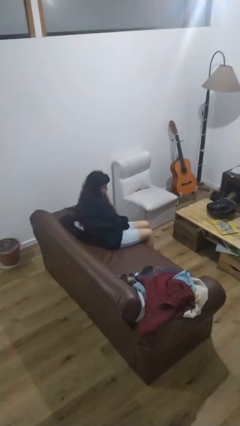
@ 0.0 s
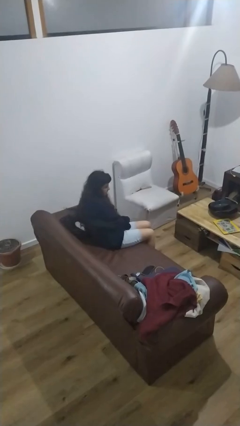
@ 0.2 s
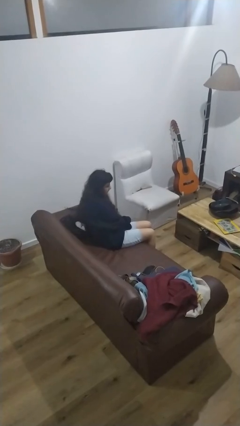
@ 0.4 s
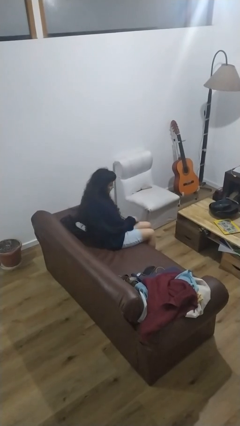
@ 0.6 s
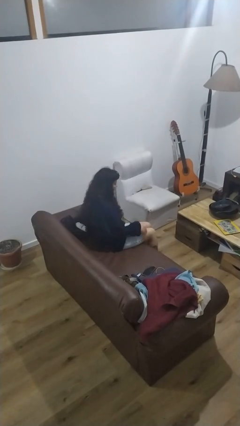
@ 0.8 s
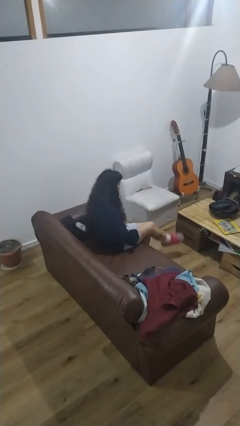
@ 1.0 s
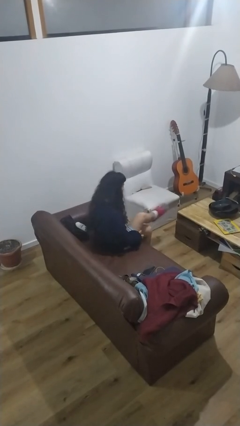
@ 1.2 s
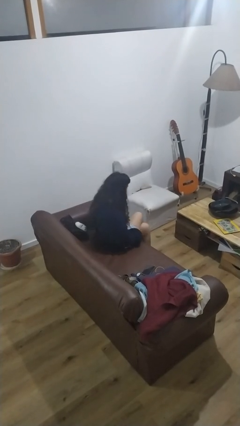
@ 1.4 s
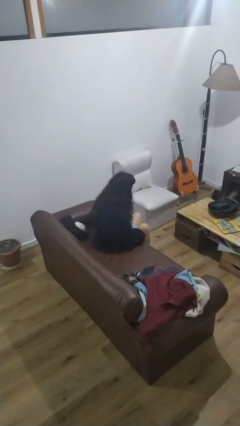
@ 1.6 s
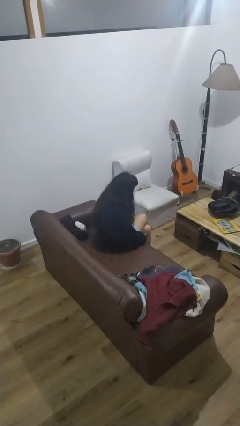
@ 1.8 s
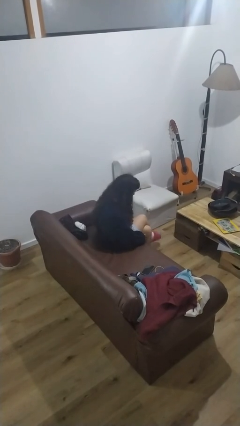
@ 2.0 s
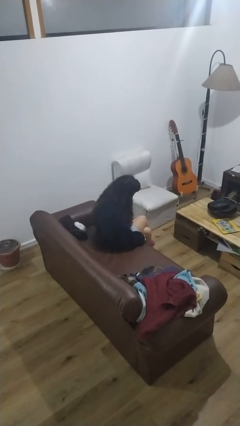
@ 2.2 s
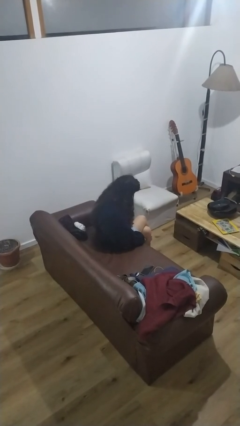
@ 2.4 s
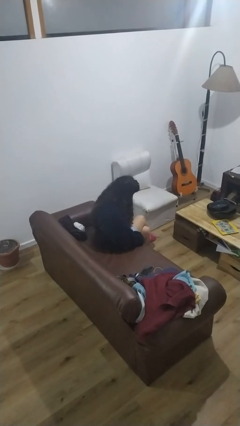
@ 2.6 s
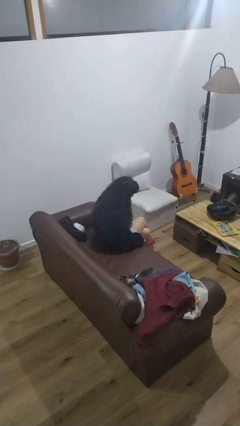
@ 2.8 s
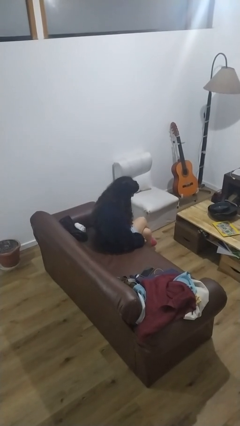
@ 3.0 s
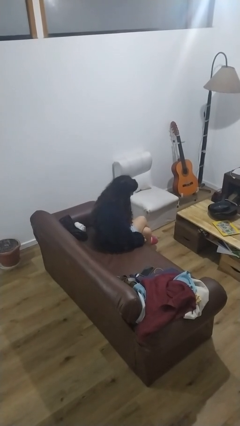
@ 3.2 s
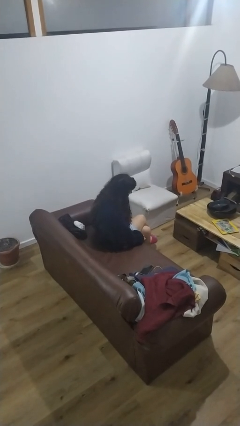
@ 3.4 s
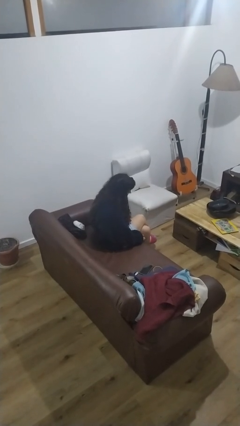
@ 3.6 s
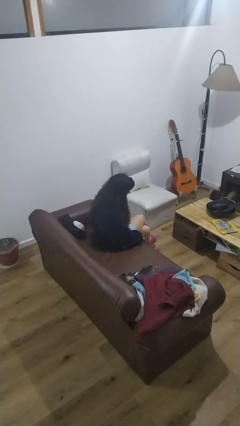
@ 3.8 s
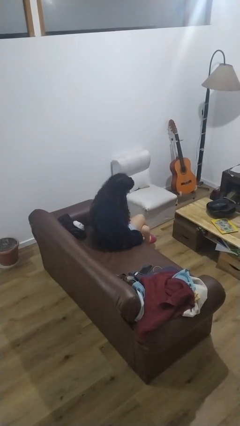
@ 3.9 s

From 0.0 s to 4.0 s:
person crosses legs

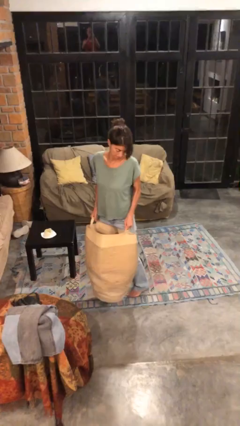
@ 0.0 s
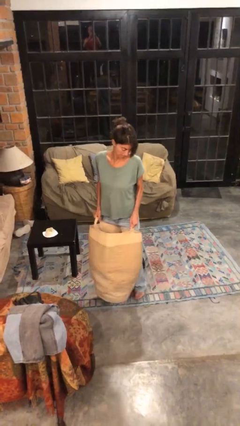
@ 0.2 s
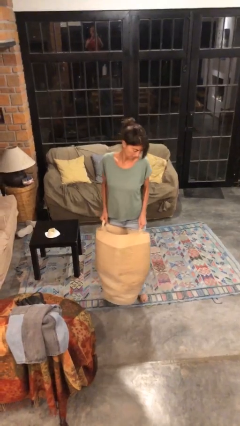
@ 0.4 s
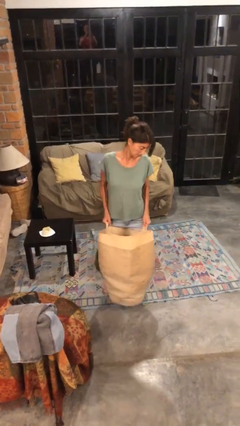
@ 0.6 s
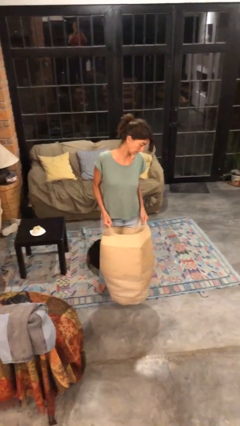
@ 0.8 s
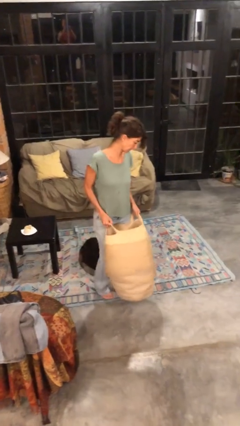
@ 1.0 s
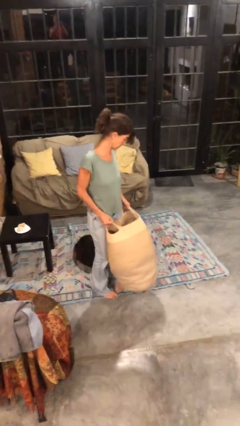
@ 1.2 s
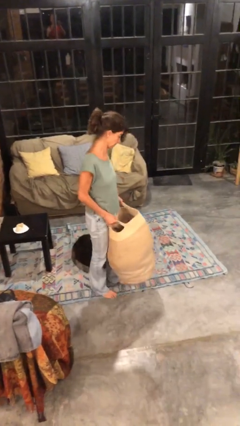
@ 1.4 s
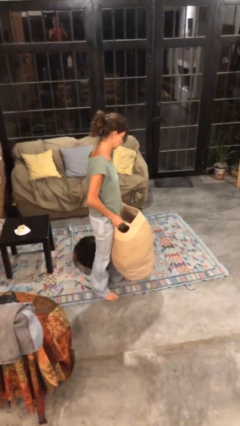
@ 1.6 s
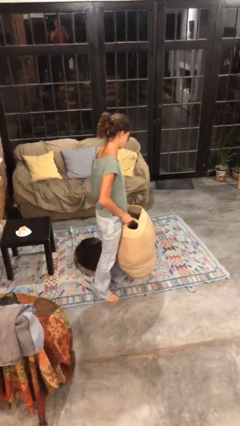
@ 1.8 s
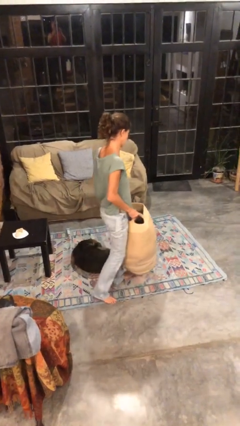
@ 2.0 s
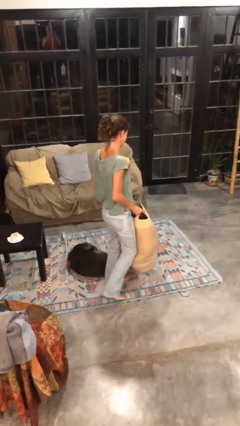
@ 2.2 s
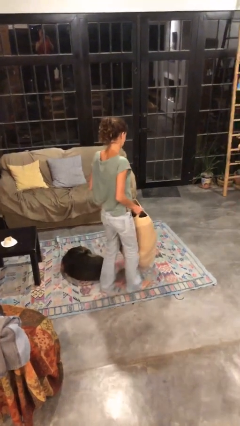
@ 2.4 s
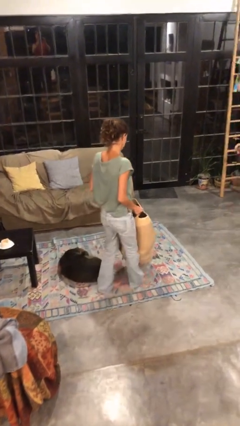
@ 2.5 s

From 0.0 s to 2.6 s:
person carries laundry basket

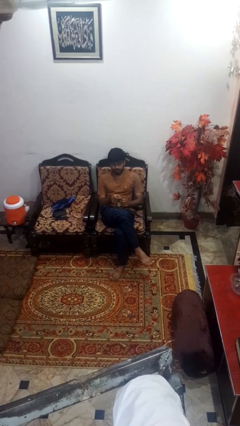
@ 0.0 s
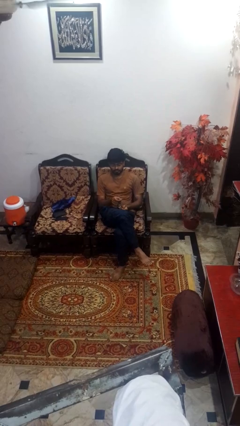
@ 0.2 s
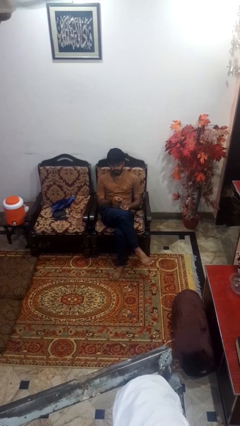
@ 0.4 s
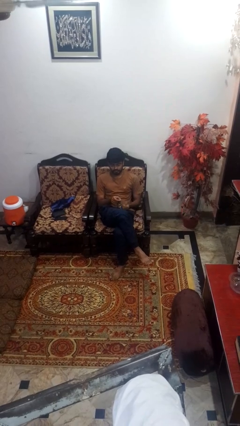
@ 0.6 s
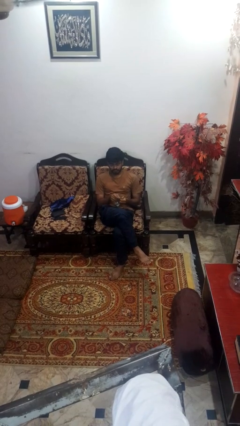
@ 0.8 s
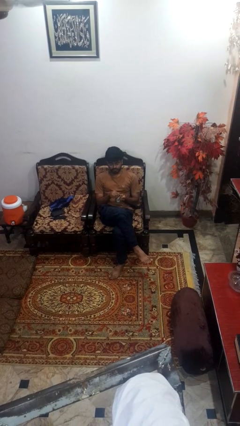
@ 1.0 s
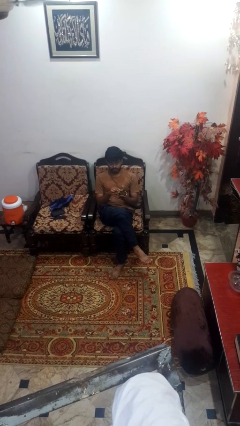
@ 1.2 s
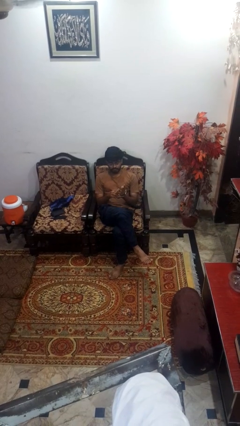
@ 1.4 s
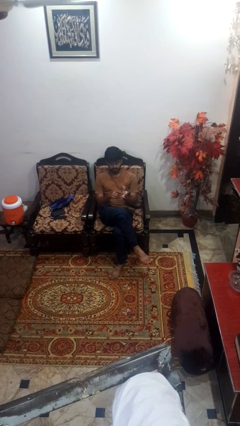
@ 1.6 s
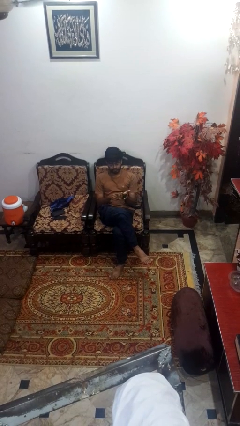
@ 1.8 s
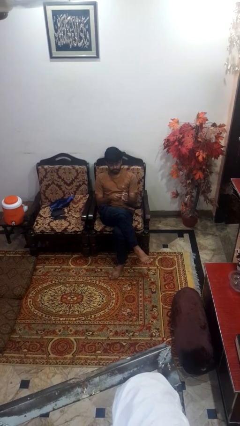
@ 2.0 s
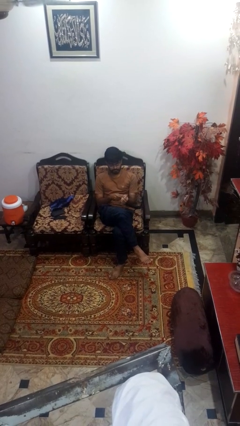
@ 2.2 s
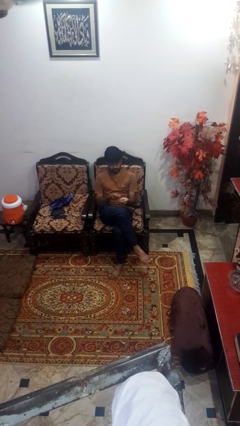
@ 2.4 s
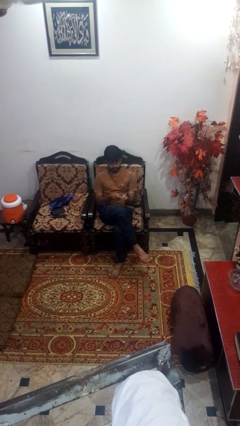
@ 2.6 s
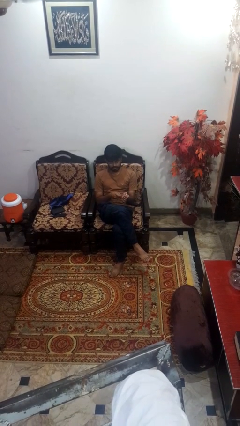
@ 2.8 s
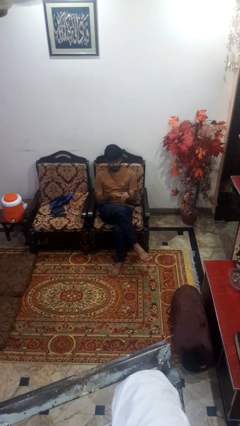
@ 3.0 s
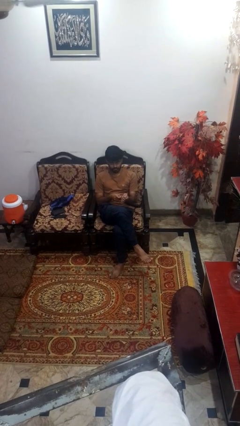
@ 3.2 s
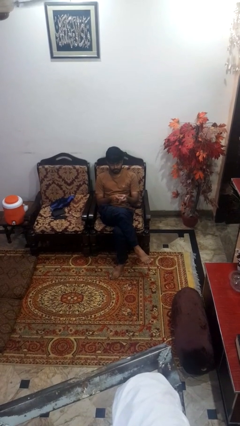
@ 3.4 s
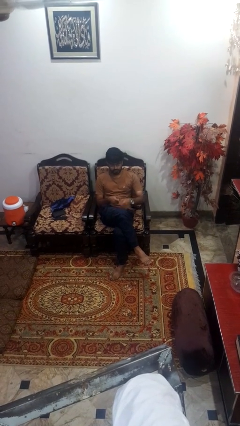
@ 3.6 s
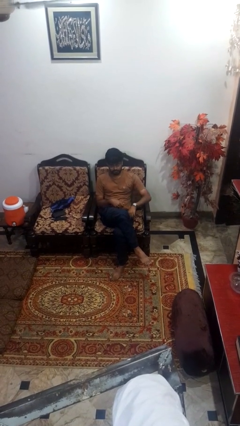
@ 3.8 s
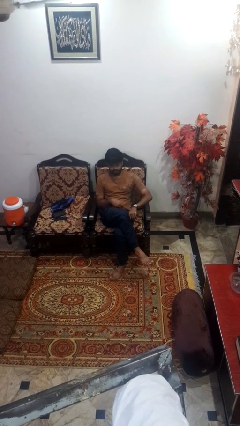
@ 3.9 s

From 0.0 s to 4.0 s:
person puts on wristwatch

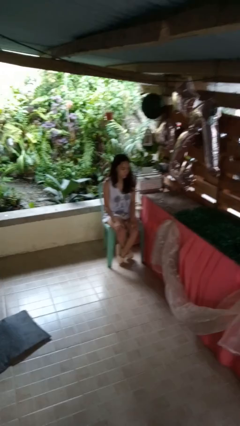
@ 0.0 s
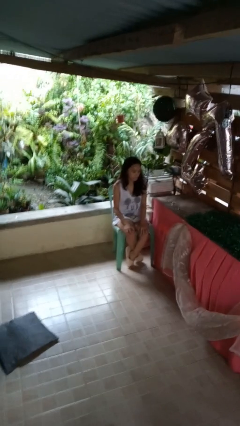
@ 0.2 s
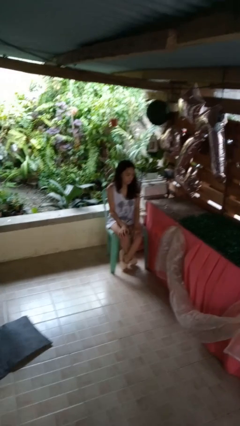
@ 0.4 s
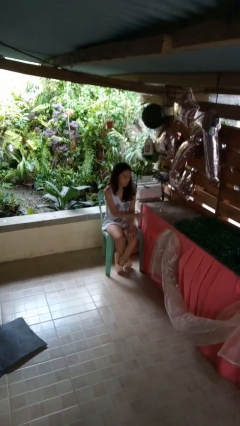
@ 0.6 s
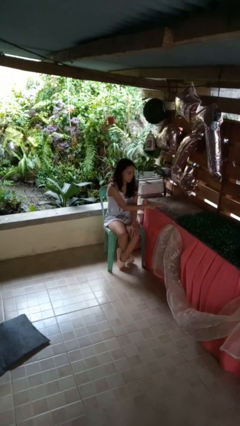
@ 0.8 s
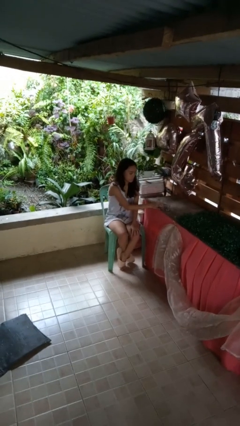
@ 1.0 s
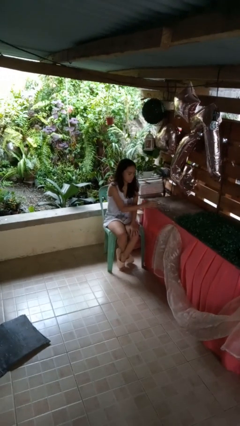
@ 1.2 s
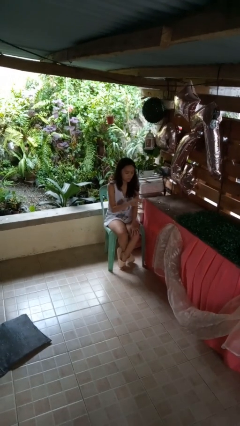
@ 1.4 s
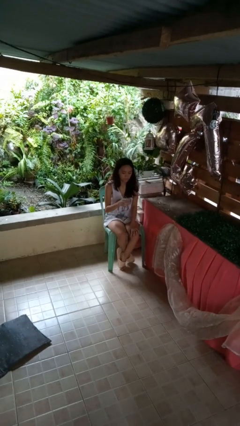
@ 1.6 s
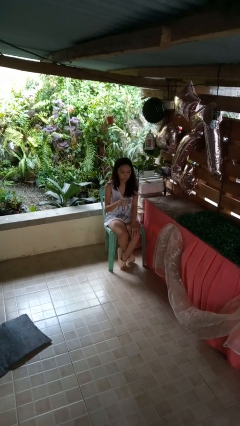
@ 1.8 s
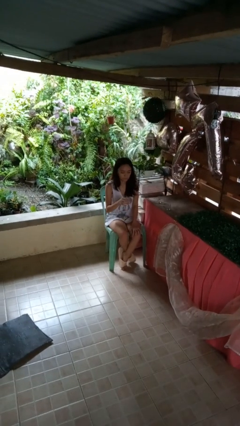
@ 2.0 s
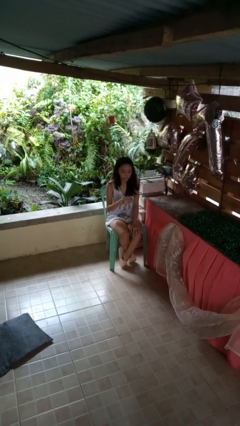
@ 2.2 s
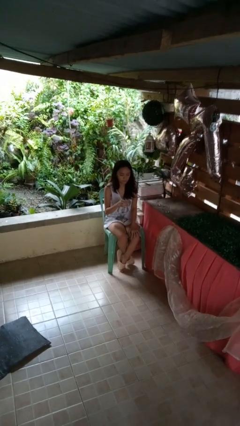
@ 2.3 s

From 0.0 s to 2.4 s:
person picks up object from table

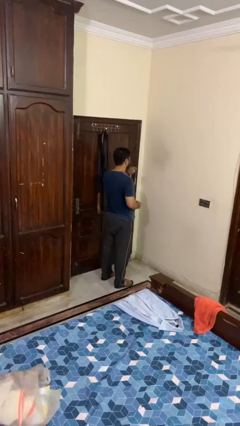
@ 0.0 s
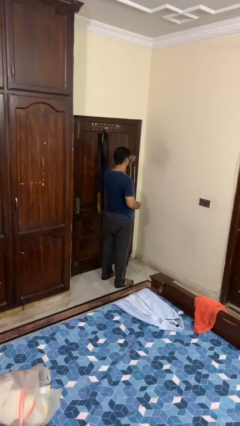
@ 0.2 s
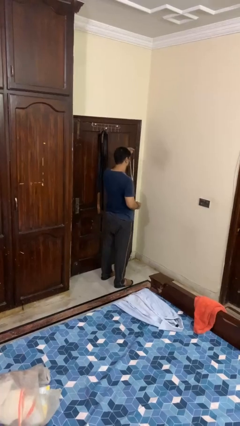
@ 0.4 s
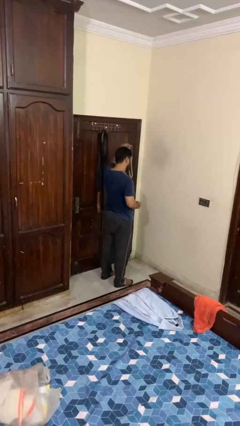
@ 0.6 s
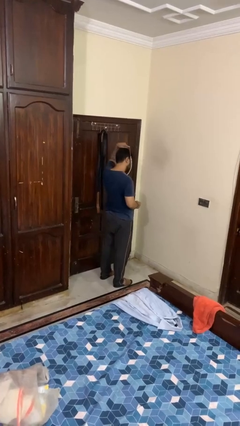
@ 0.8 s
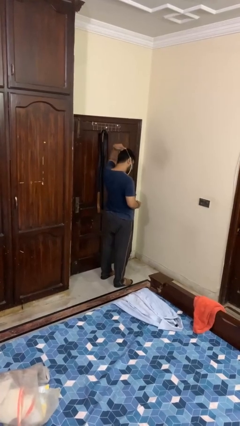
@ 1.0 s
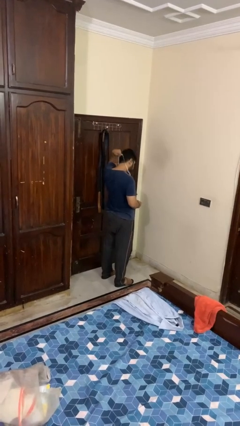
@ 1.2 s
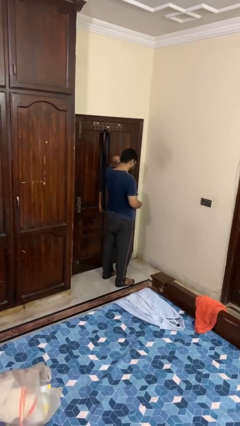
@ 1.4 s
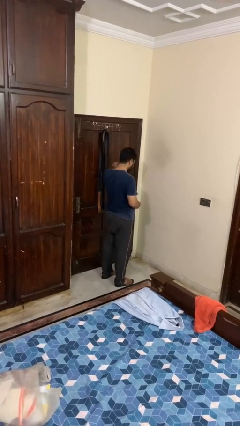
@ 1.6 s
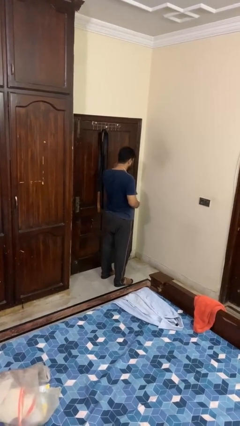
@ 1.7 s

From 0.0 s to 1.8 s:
person puts on necklace

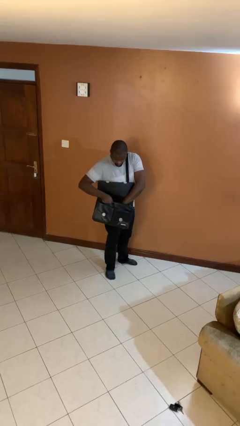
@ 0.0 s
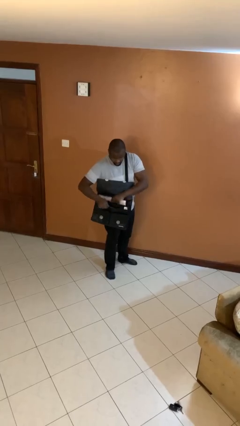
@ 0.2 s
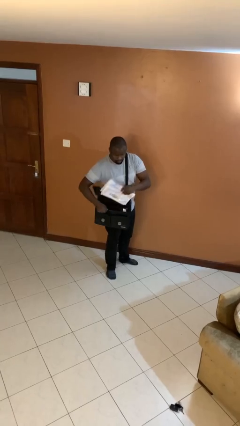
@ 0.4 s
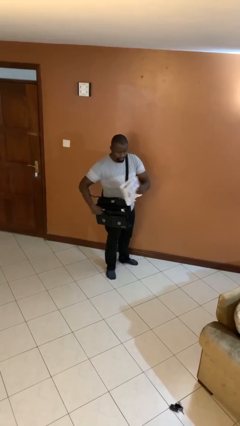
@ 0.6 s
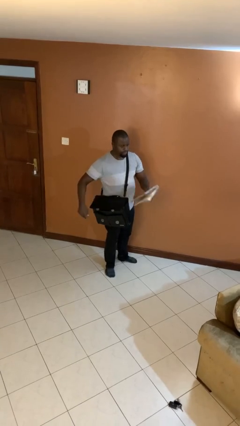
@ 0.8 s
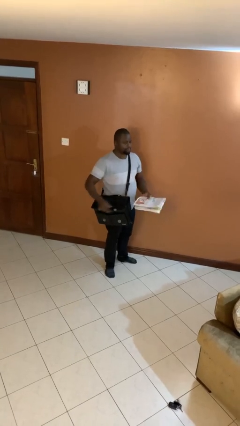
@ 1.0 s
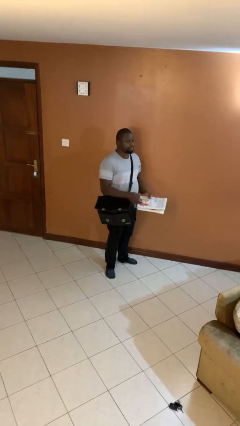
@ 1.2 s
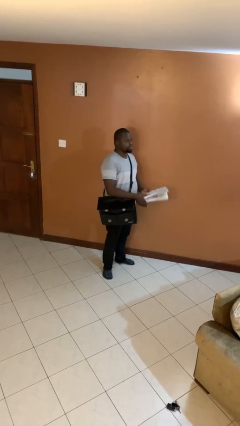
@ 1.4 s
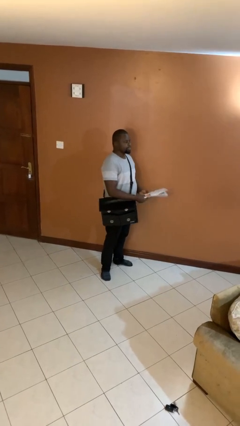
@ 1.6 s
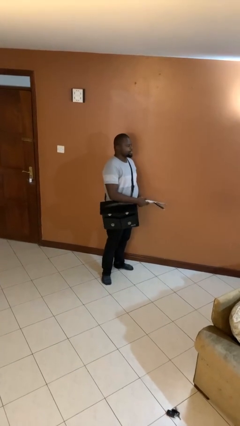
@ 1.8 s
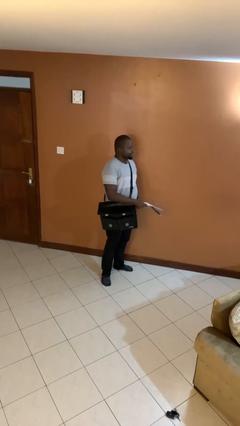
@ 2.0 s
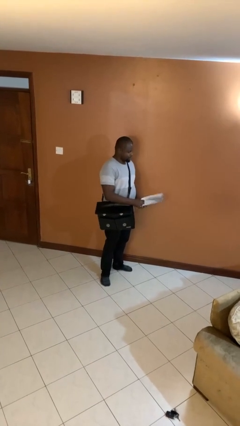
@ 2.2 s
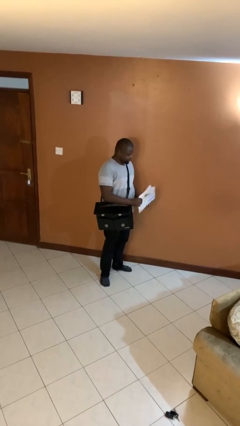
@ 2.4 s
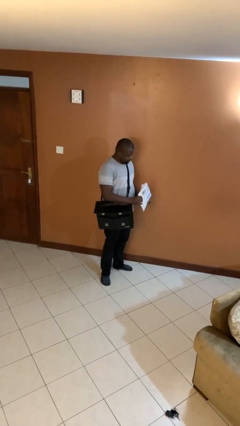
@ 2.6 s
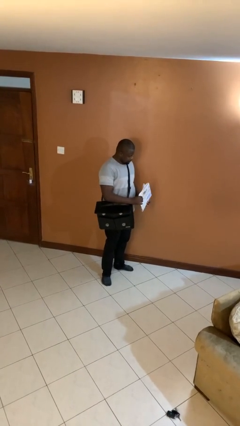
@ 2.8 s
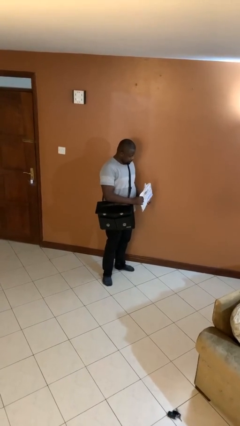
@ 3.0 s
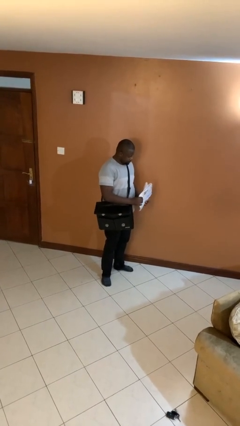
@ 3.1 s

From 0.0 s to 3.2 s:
person takes object from purse
